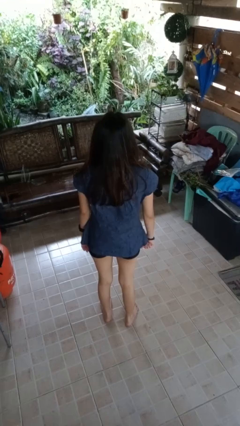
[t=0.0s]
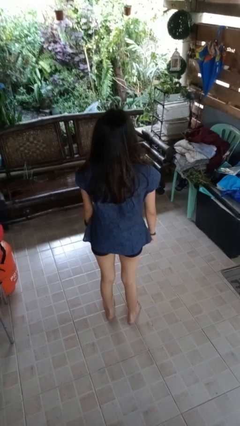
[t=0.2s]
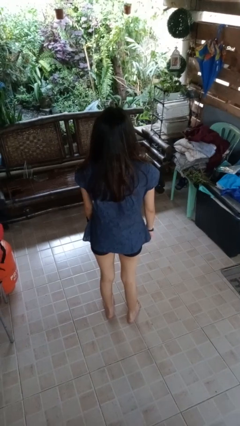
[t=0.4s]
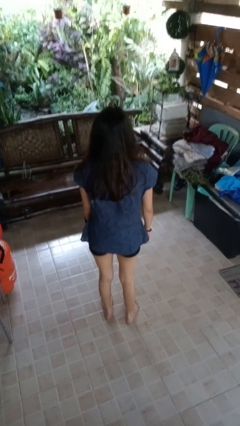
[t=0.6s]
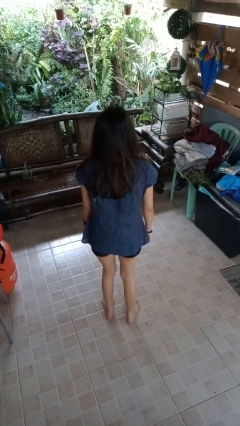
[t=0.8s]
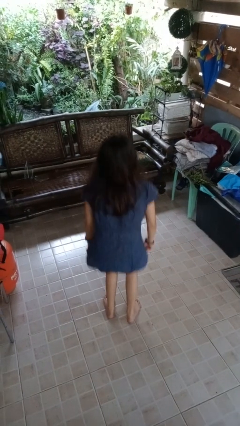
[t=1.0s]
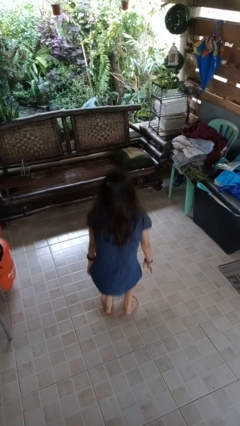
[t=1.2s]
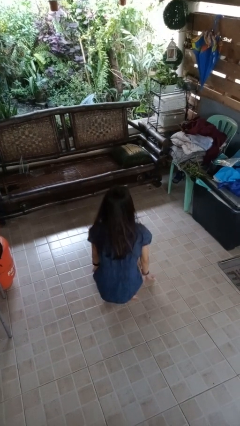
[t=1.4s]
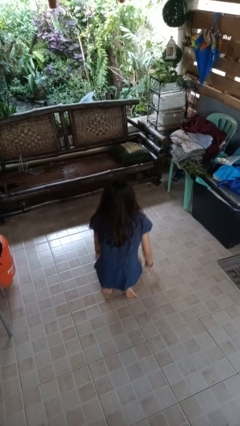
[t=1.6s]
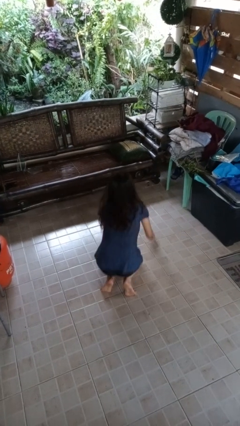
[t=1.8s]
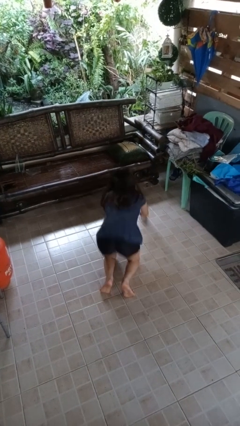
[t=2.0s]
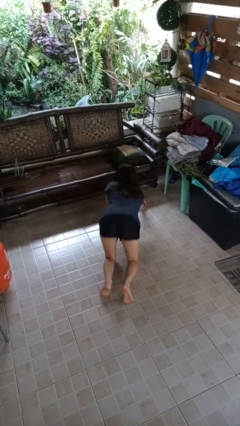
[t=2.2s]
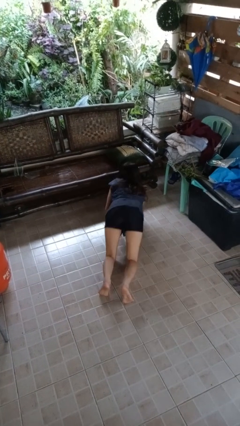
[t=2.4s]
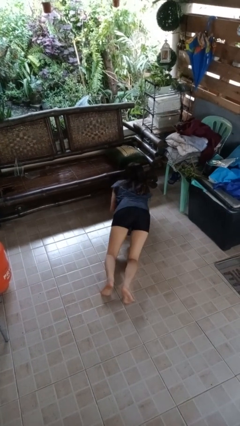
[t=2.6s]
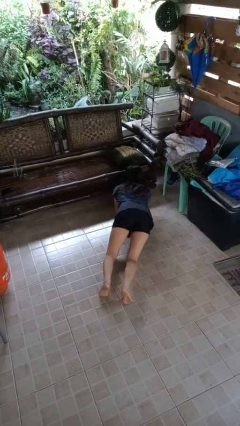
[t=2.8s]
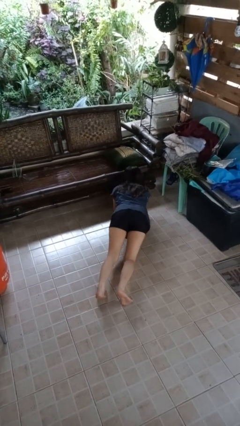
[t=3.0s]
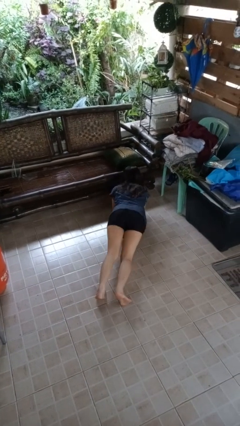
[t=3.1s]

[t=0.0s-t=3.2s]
person exercises with plank

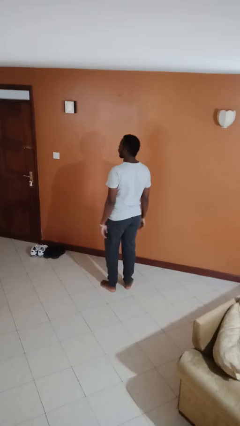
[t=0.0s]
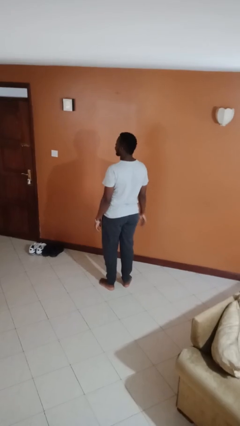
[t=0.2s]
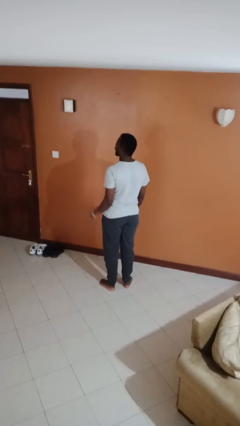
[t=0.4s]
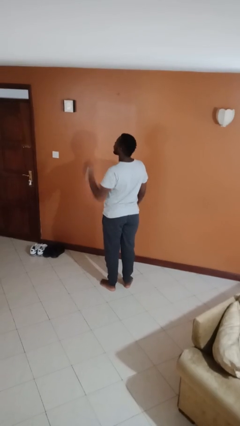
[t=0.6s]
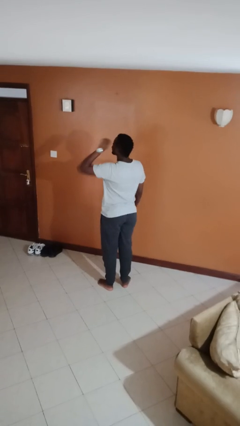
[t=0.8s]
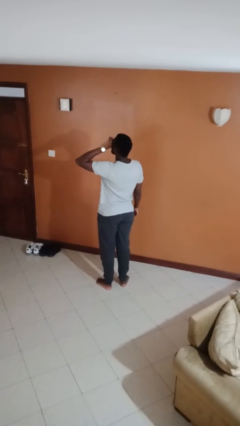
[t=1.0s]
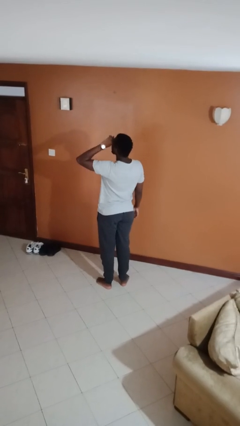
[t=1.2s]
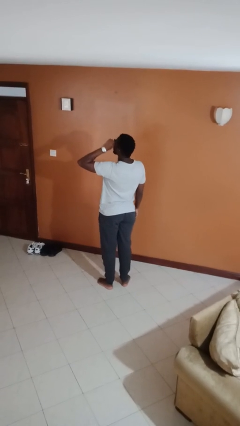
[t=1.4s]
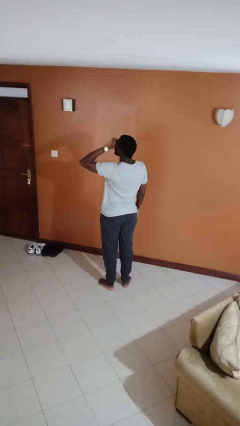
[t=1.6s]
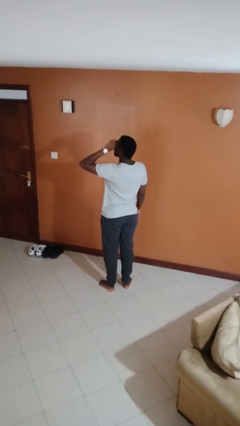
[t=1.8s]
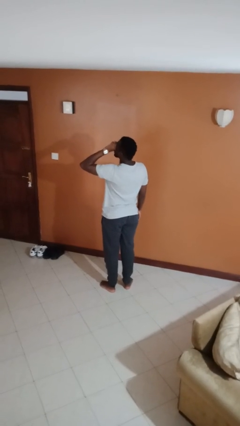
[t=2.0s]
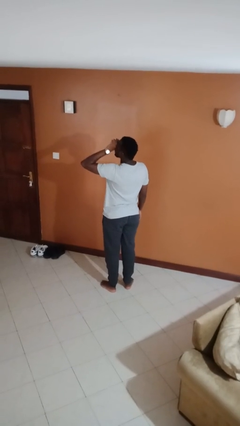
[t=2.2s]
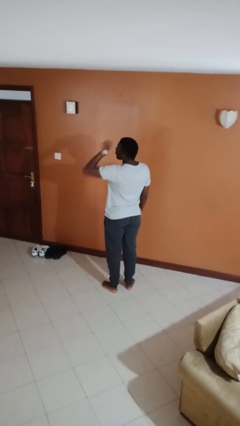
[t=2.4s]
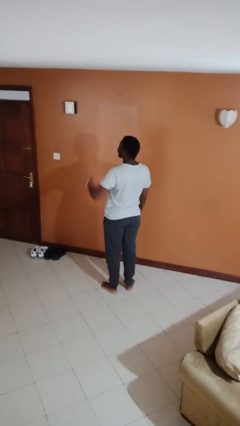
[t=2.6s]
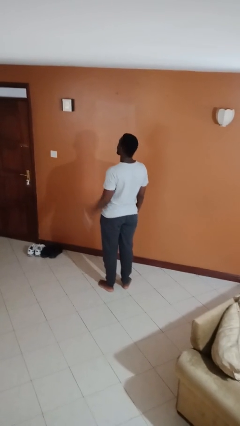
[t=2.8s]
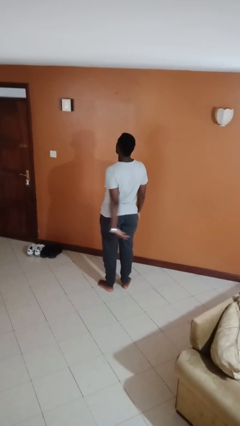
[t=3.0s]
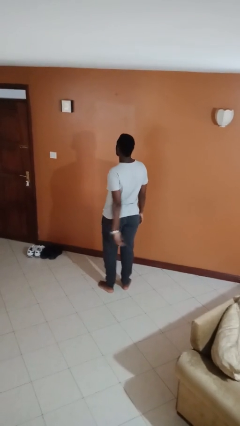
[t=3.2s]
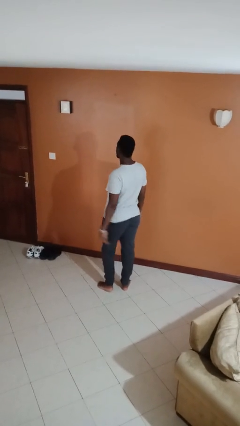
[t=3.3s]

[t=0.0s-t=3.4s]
person rubs eyes

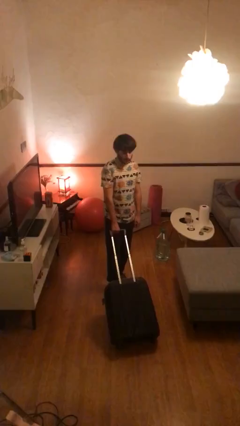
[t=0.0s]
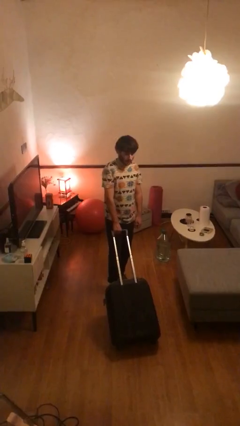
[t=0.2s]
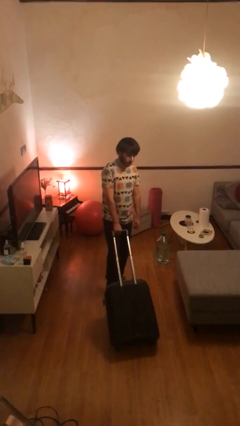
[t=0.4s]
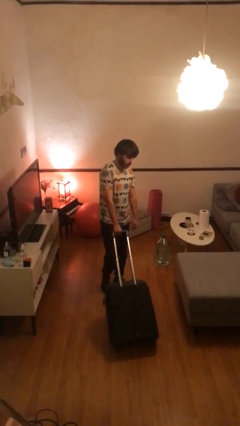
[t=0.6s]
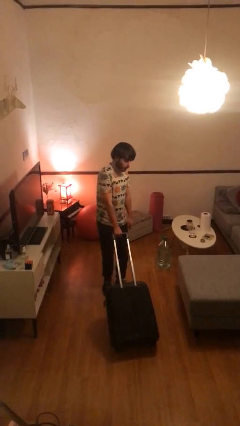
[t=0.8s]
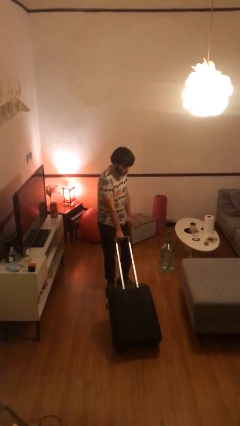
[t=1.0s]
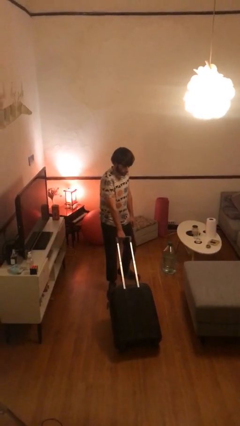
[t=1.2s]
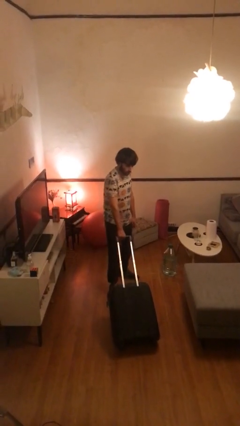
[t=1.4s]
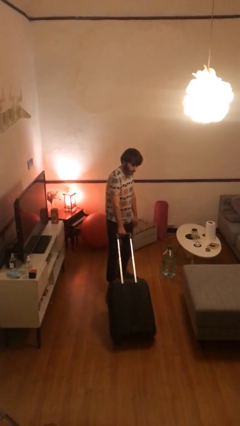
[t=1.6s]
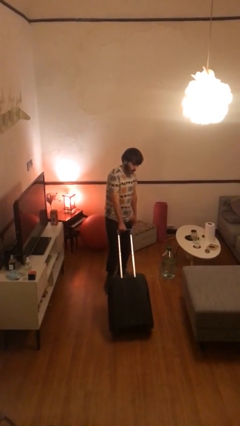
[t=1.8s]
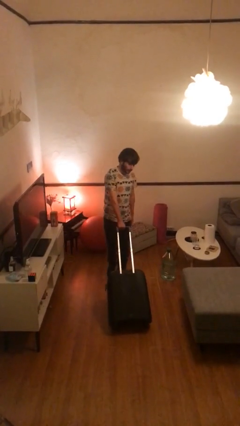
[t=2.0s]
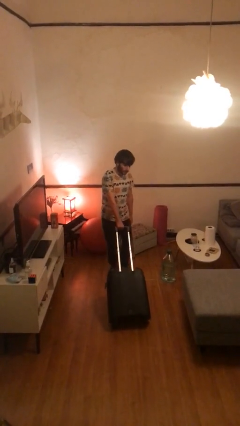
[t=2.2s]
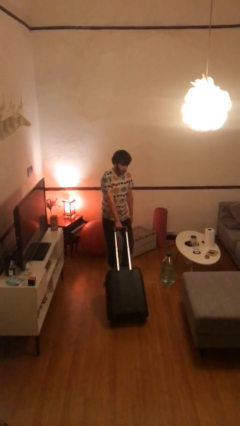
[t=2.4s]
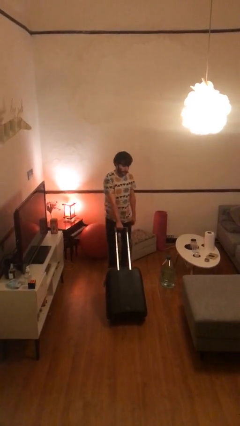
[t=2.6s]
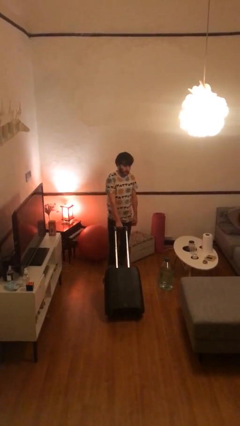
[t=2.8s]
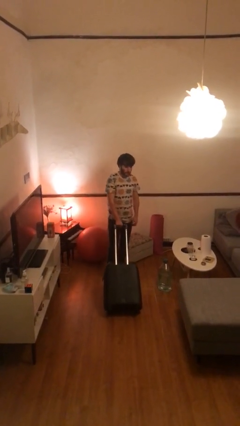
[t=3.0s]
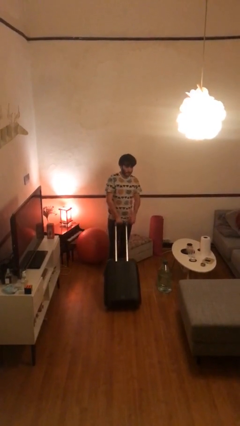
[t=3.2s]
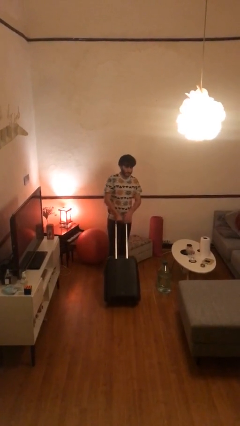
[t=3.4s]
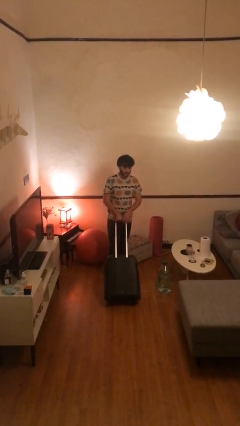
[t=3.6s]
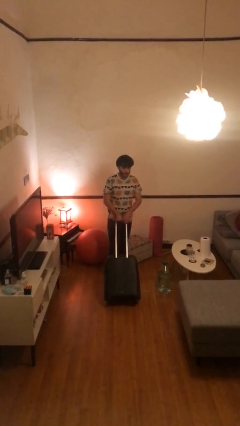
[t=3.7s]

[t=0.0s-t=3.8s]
person pulls wheeled cart

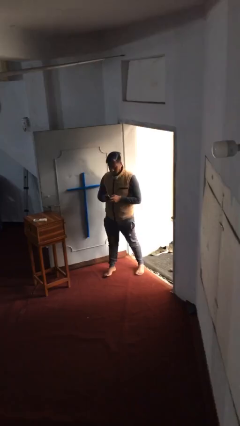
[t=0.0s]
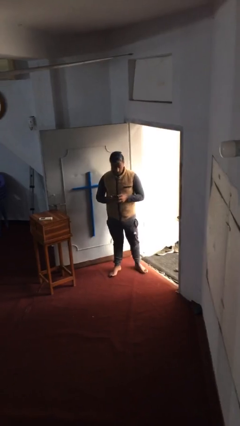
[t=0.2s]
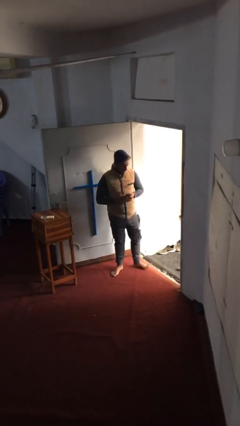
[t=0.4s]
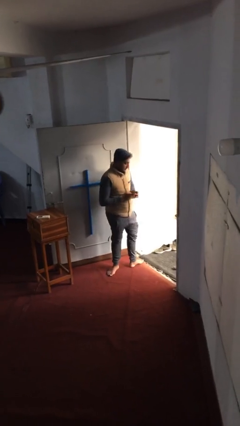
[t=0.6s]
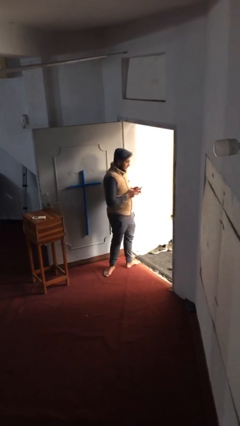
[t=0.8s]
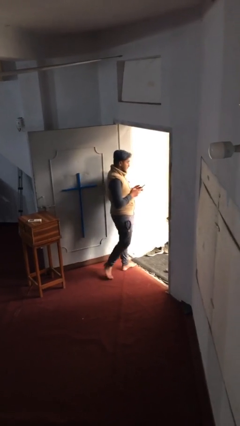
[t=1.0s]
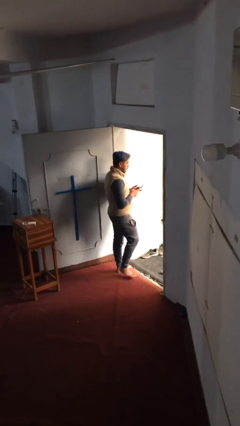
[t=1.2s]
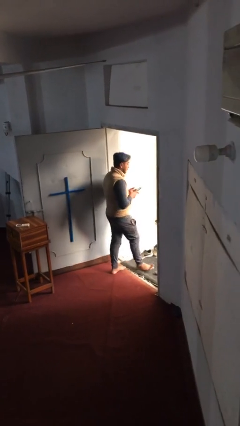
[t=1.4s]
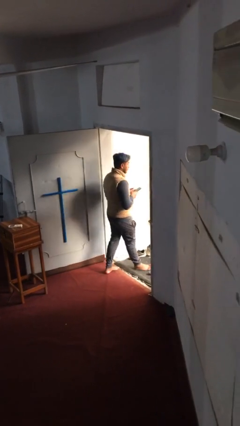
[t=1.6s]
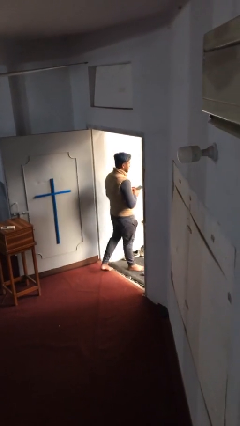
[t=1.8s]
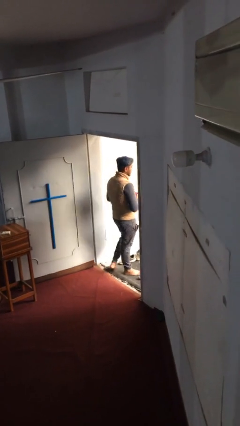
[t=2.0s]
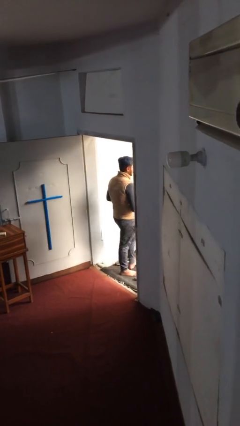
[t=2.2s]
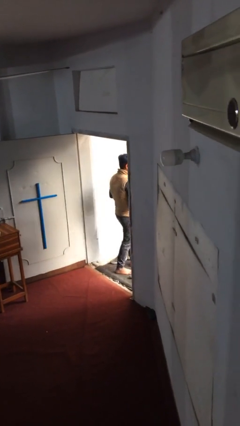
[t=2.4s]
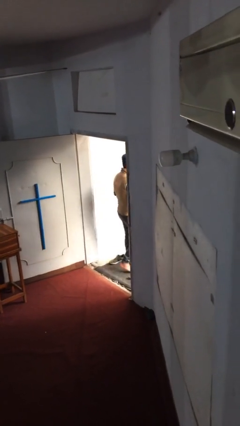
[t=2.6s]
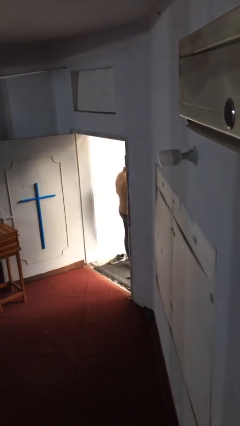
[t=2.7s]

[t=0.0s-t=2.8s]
person exits scene through structure

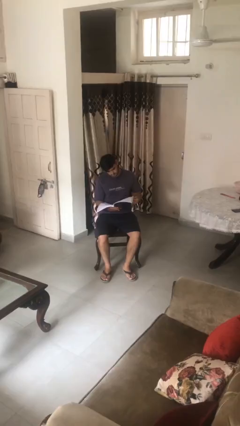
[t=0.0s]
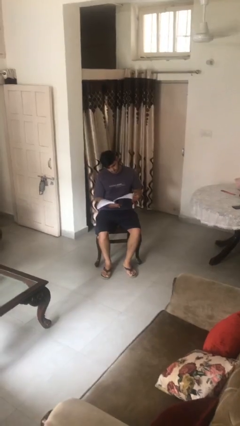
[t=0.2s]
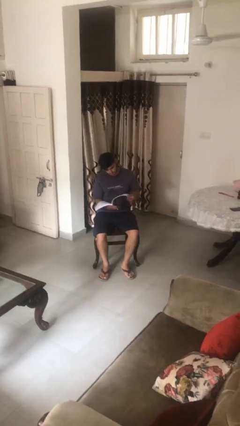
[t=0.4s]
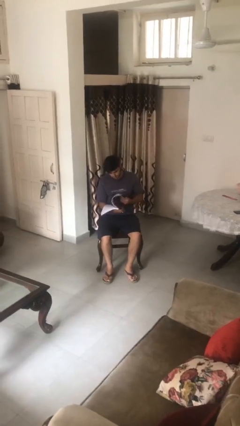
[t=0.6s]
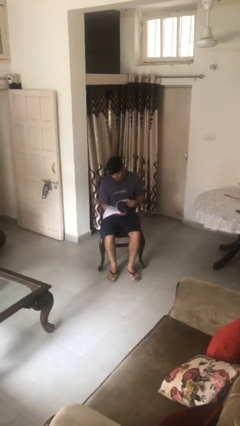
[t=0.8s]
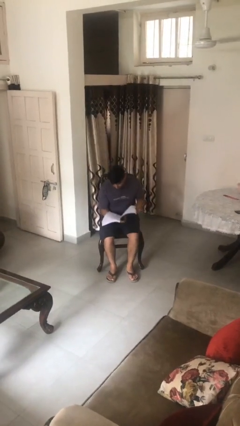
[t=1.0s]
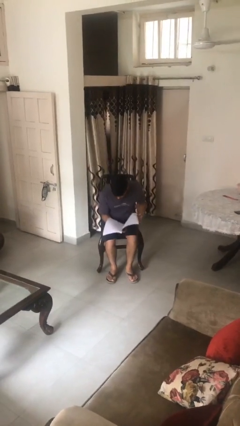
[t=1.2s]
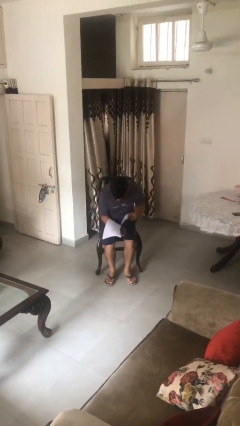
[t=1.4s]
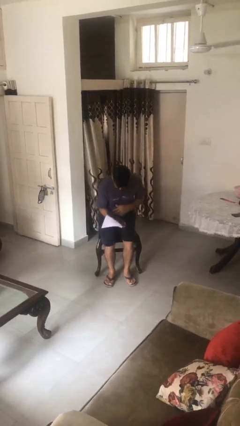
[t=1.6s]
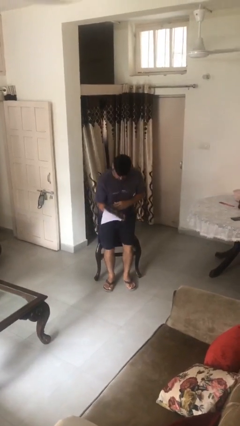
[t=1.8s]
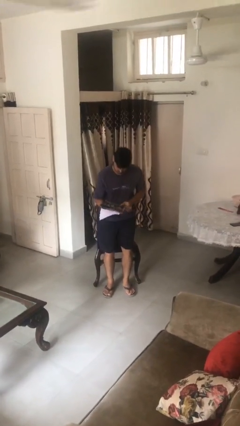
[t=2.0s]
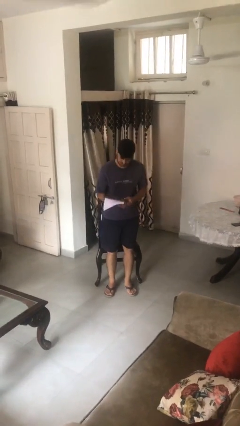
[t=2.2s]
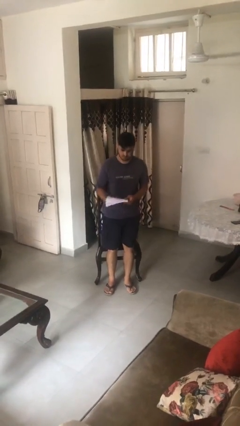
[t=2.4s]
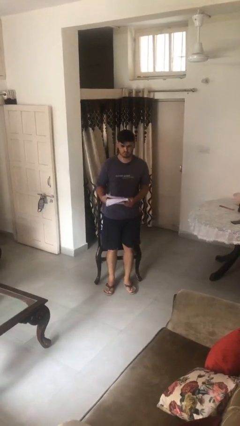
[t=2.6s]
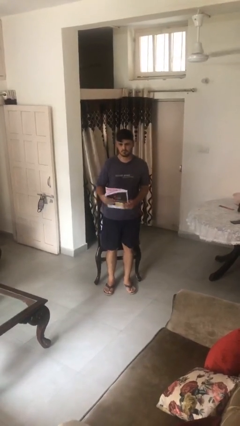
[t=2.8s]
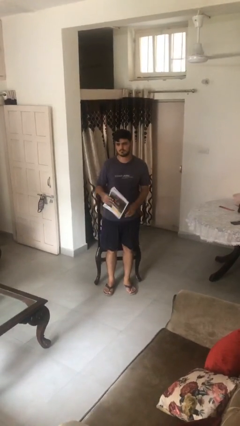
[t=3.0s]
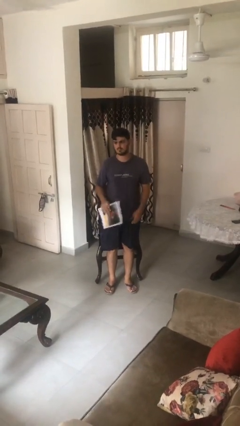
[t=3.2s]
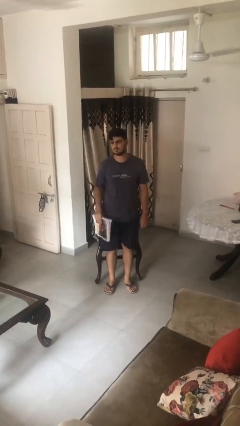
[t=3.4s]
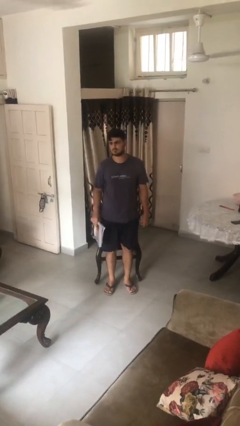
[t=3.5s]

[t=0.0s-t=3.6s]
person stands up

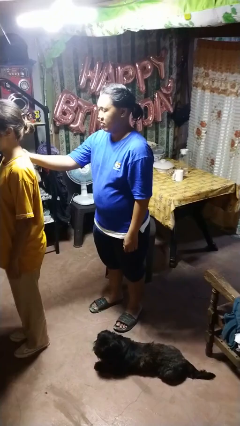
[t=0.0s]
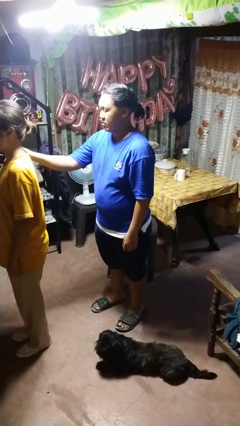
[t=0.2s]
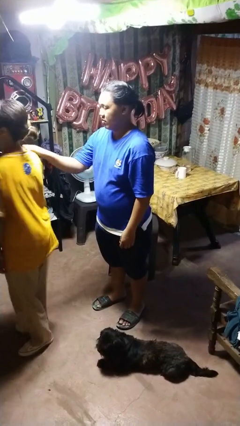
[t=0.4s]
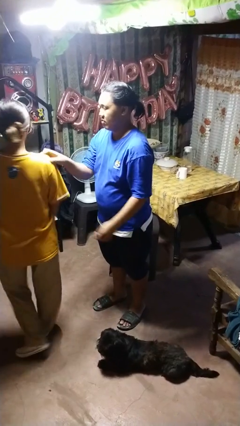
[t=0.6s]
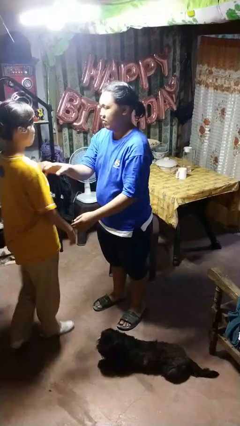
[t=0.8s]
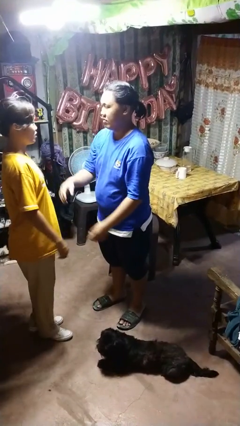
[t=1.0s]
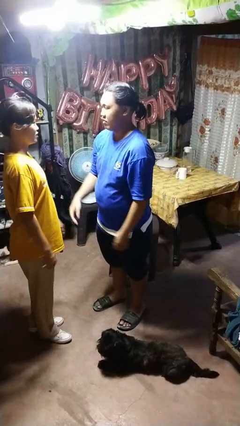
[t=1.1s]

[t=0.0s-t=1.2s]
person spins person around
